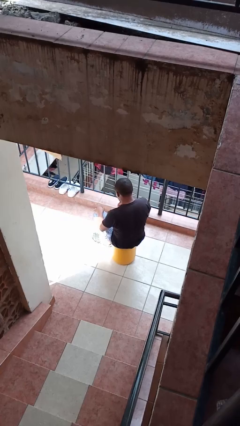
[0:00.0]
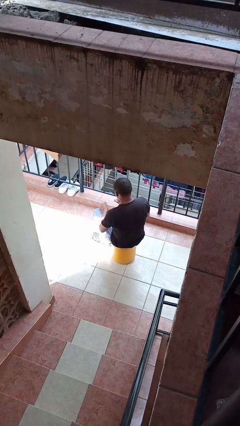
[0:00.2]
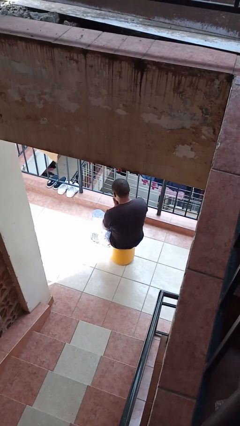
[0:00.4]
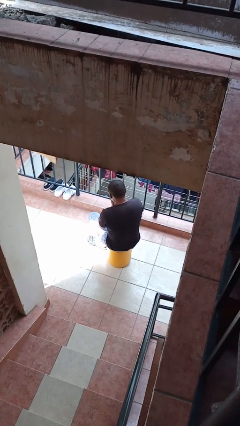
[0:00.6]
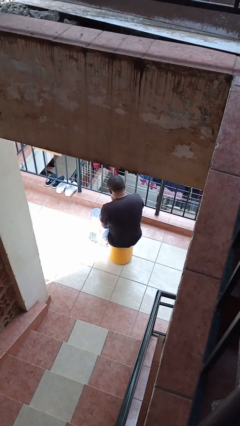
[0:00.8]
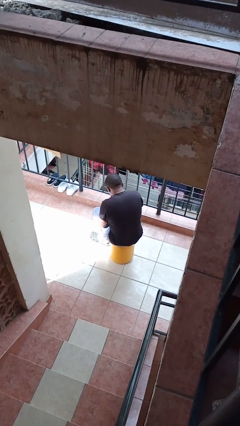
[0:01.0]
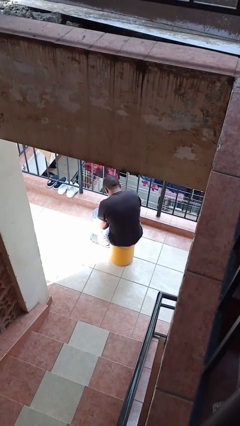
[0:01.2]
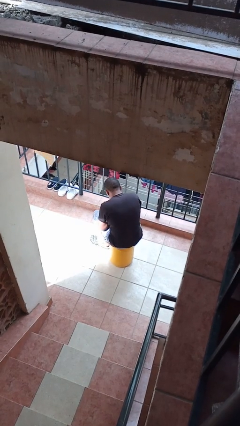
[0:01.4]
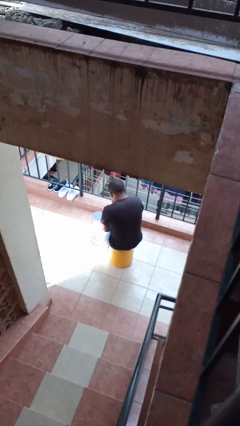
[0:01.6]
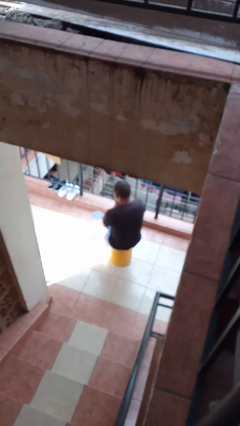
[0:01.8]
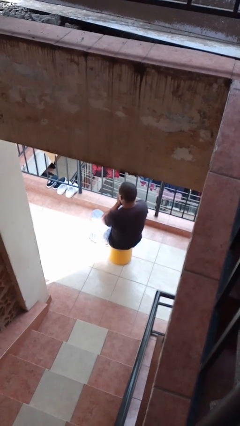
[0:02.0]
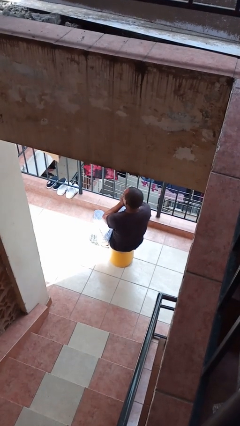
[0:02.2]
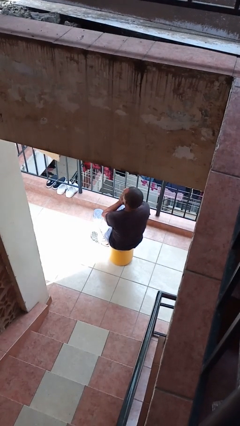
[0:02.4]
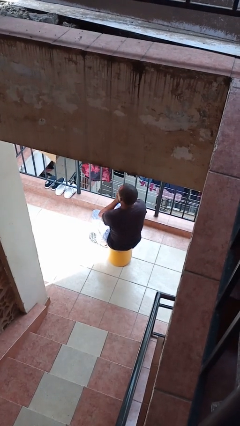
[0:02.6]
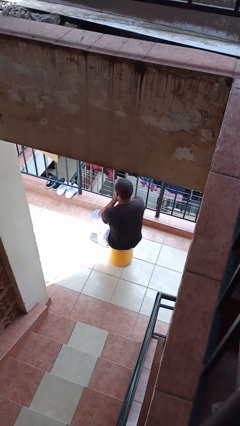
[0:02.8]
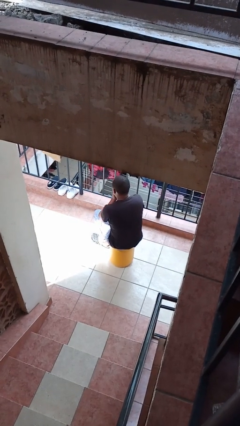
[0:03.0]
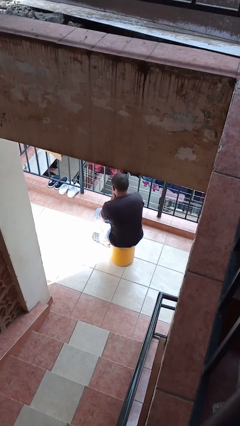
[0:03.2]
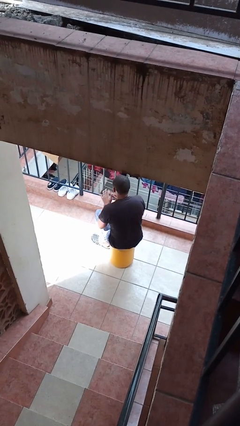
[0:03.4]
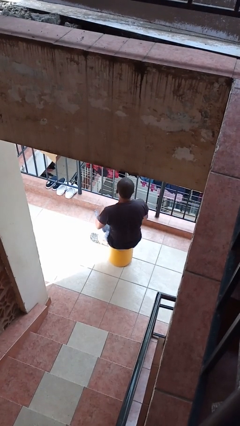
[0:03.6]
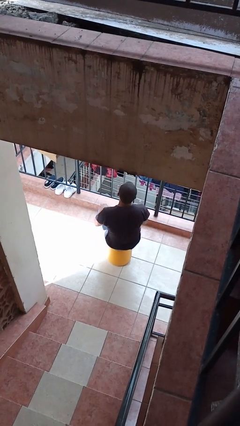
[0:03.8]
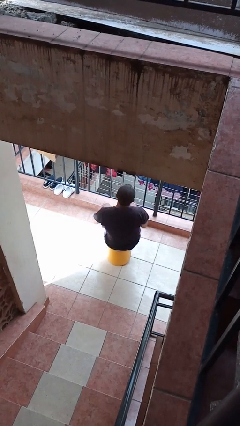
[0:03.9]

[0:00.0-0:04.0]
person blows into hands

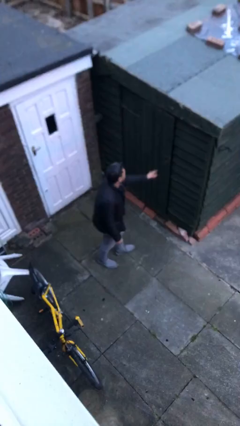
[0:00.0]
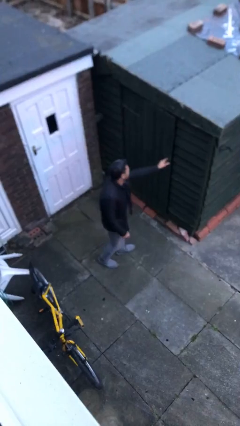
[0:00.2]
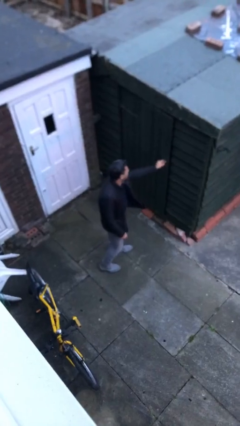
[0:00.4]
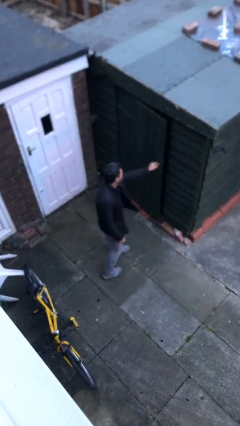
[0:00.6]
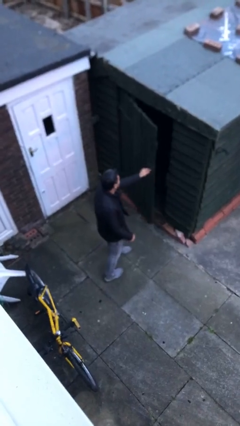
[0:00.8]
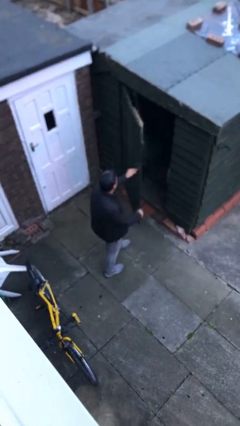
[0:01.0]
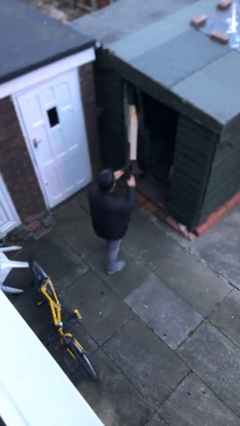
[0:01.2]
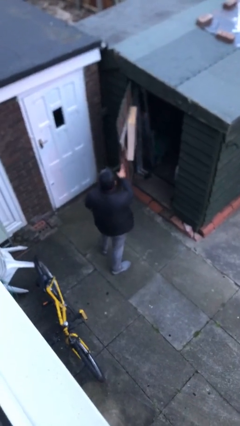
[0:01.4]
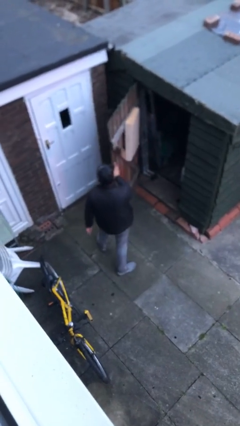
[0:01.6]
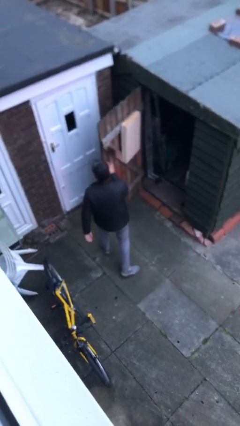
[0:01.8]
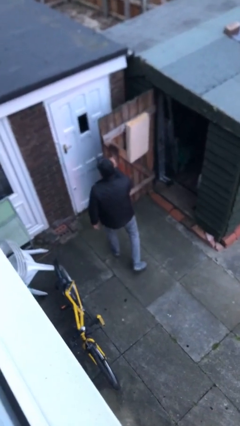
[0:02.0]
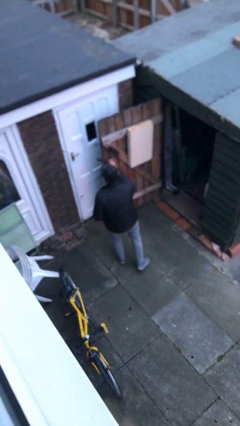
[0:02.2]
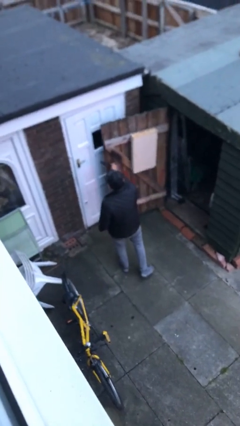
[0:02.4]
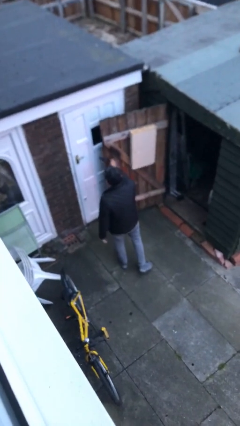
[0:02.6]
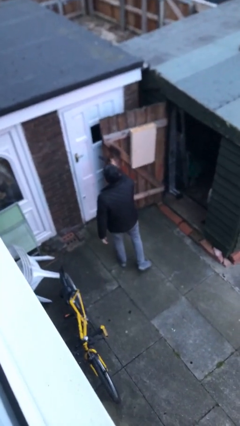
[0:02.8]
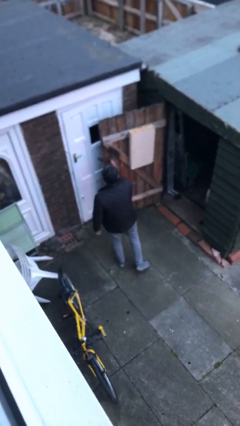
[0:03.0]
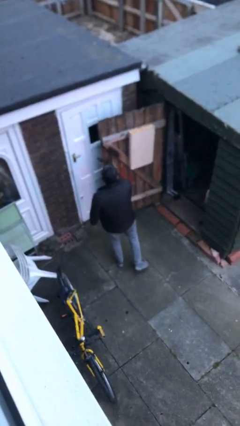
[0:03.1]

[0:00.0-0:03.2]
person opens facility door

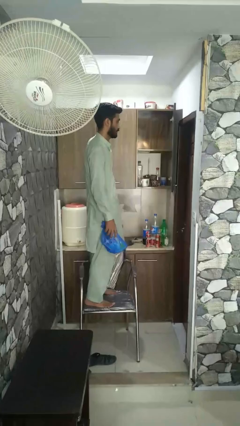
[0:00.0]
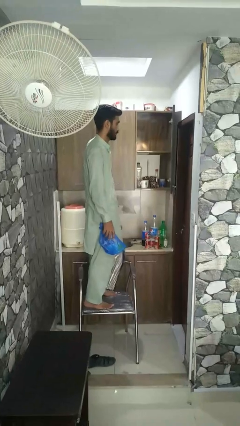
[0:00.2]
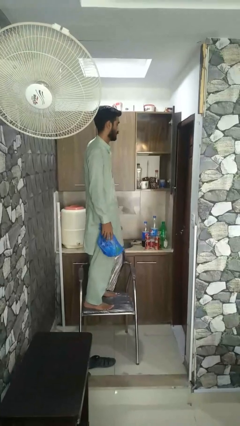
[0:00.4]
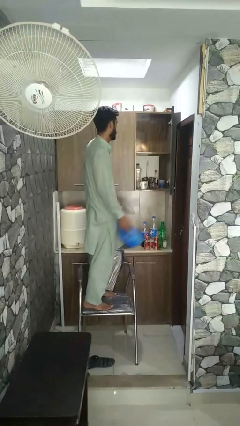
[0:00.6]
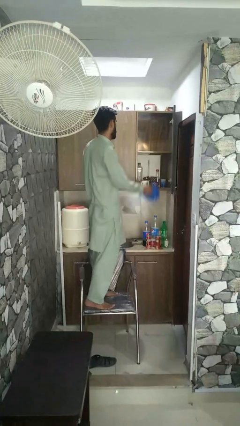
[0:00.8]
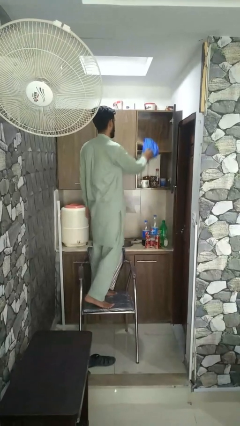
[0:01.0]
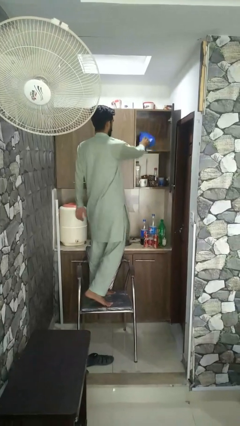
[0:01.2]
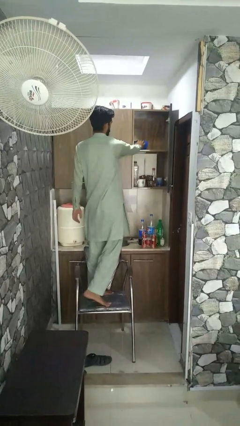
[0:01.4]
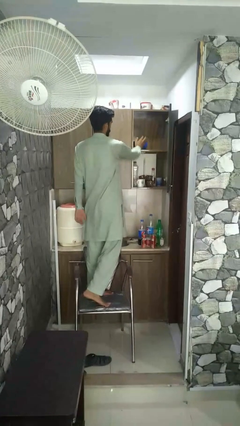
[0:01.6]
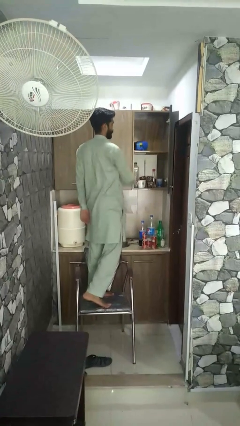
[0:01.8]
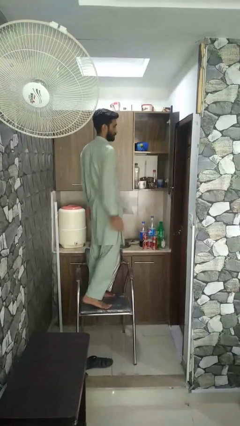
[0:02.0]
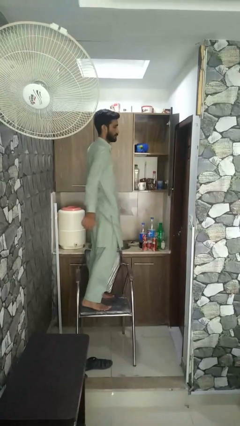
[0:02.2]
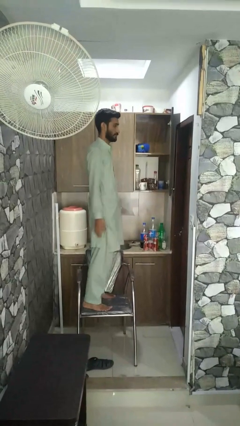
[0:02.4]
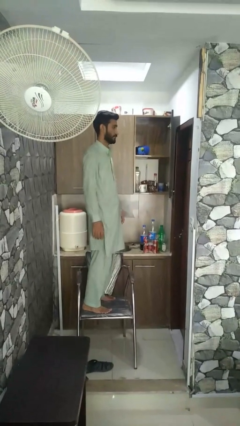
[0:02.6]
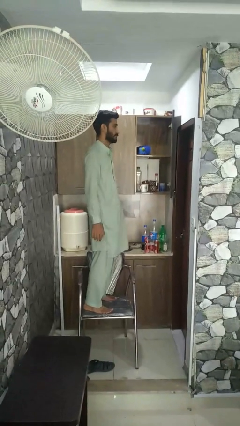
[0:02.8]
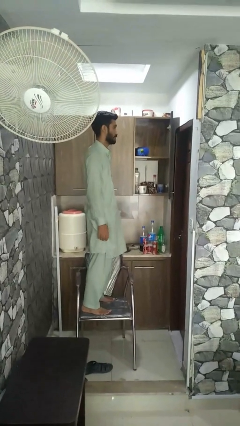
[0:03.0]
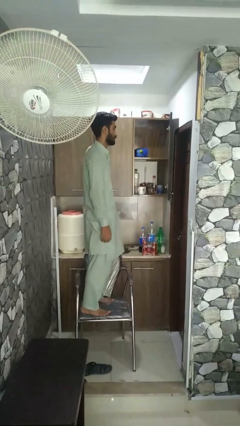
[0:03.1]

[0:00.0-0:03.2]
person puts down object on shelf

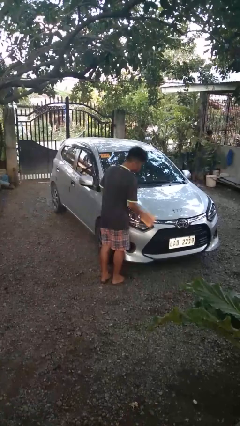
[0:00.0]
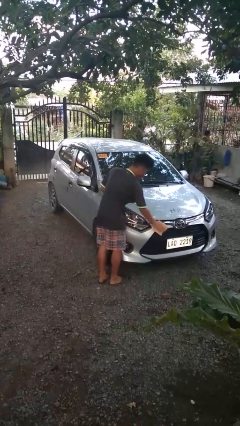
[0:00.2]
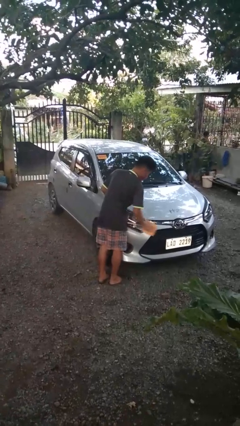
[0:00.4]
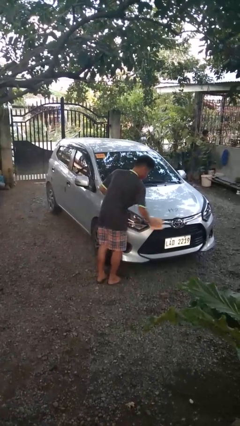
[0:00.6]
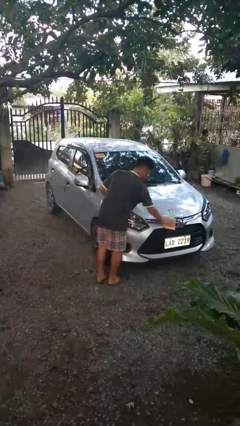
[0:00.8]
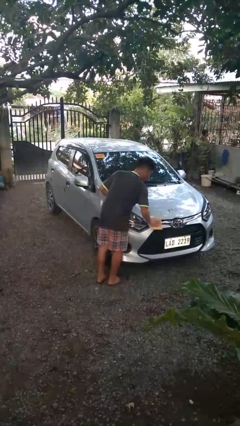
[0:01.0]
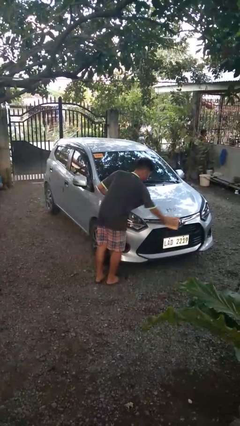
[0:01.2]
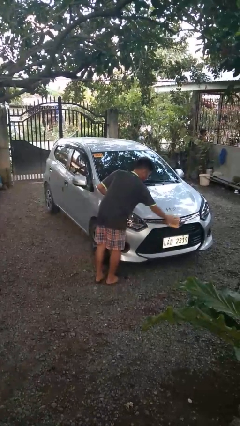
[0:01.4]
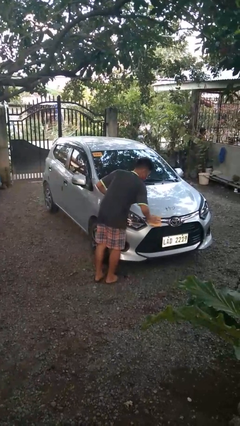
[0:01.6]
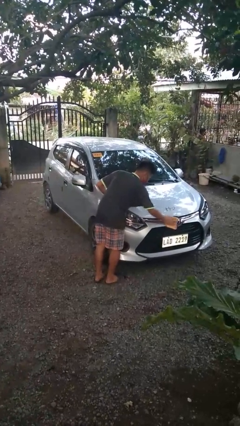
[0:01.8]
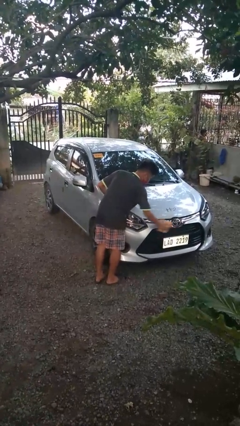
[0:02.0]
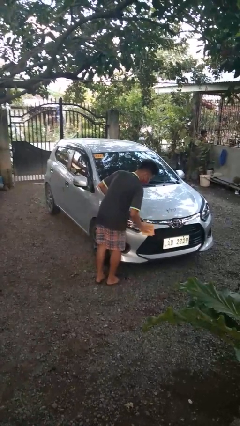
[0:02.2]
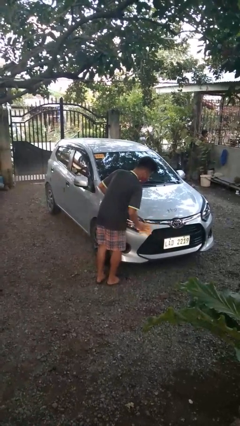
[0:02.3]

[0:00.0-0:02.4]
person polishes car with rag

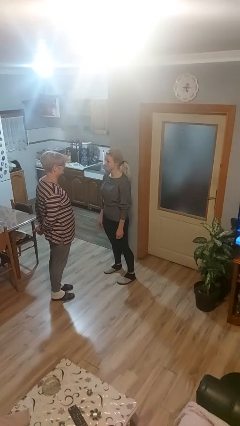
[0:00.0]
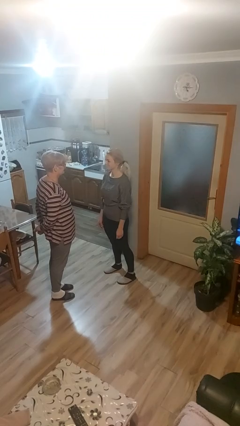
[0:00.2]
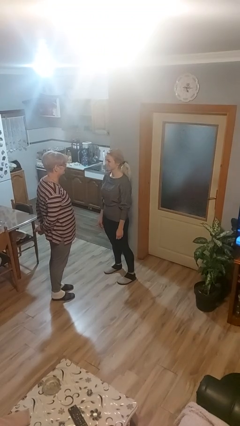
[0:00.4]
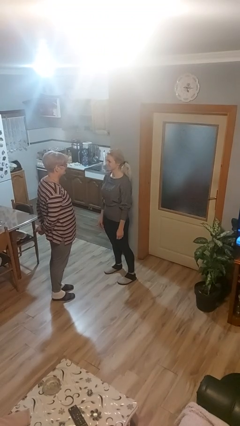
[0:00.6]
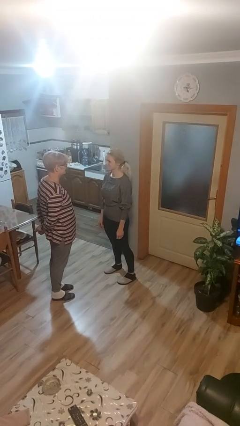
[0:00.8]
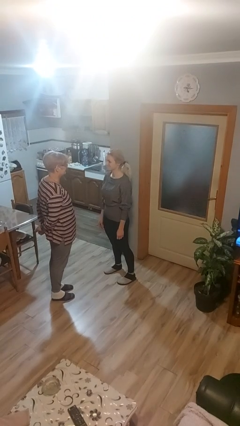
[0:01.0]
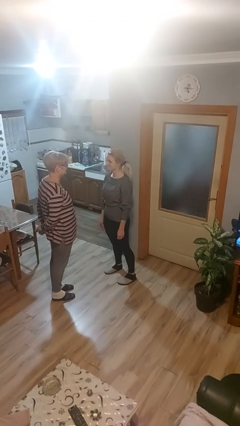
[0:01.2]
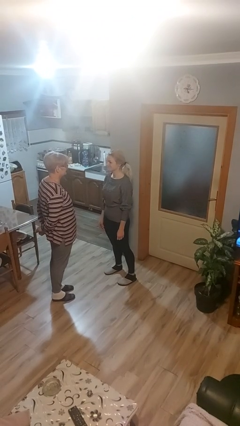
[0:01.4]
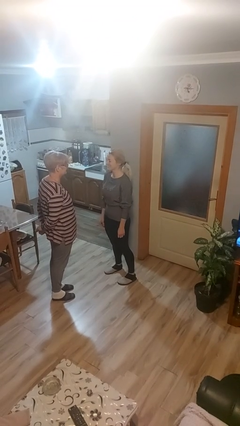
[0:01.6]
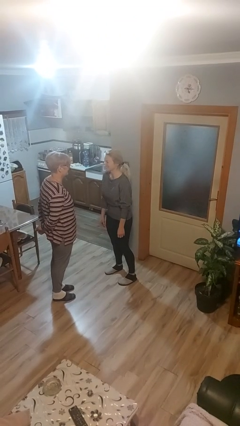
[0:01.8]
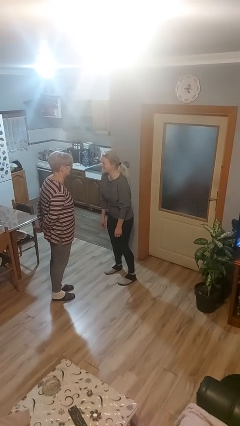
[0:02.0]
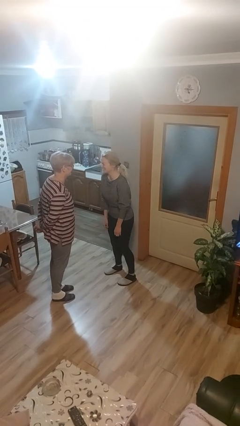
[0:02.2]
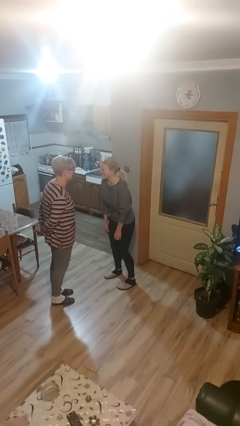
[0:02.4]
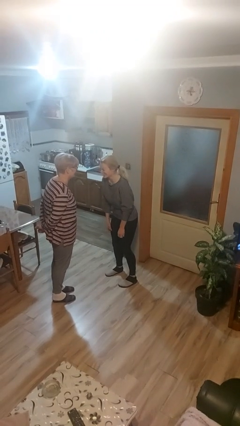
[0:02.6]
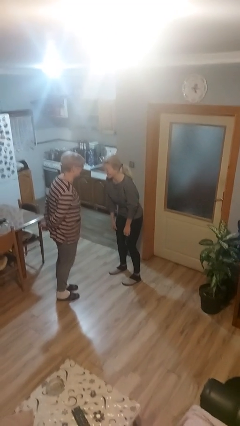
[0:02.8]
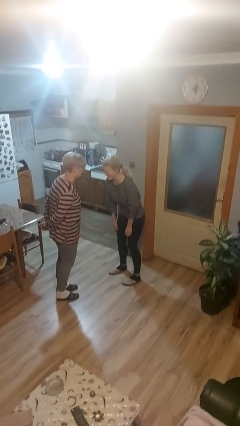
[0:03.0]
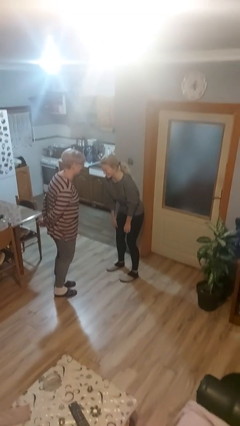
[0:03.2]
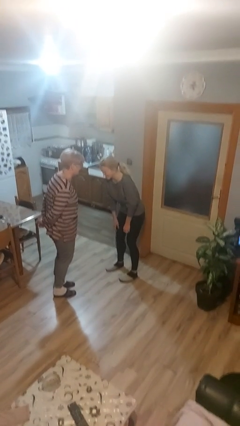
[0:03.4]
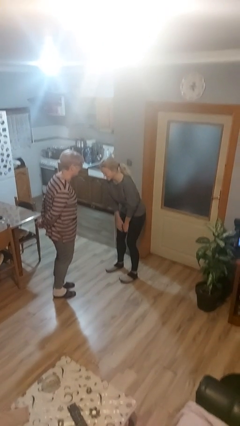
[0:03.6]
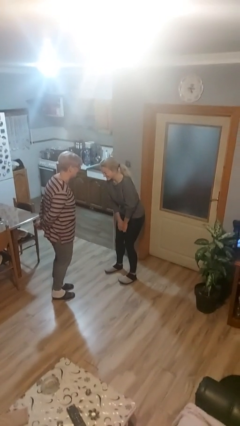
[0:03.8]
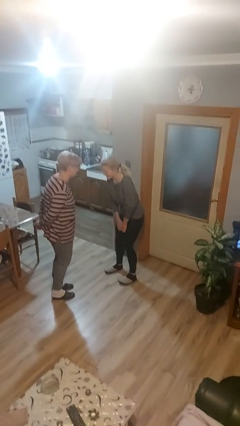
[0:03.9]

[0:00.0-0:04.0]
person laughs with person

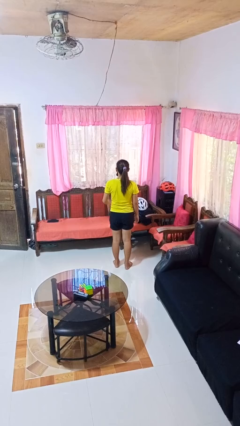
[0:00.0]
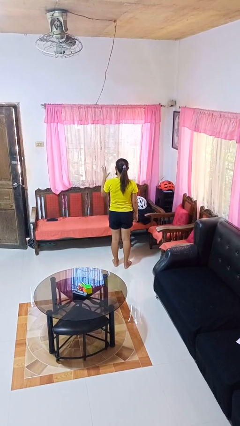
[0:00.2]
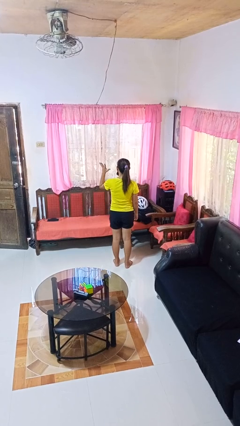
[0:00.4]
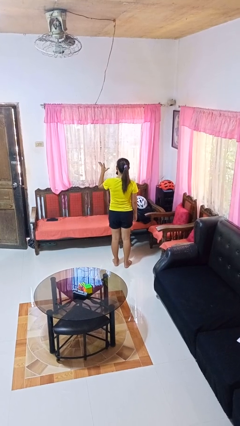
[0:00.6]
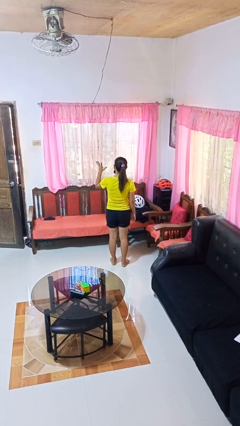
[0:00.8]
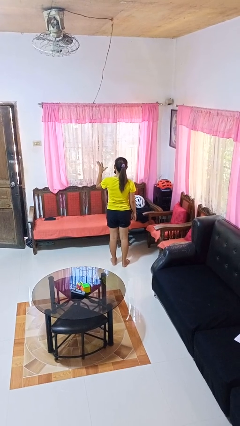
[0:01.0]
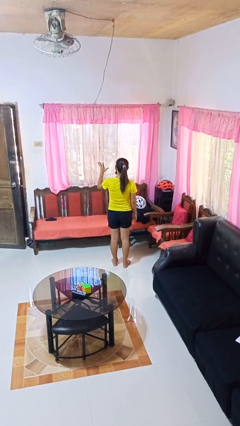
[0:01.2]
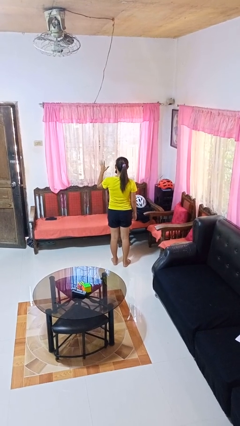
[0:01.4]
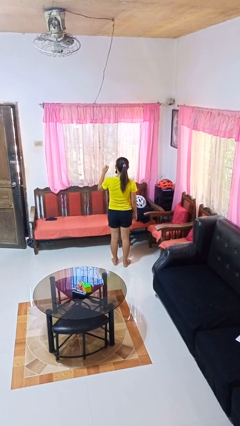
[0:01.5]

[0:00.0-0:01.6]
person gestures number five
